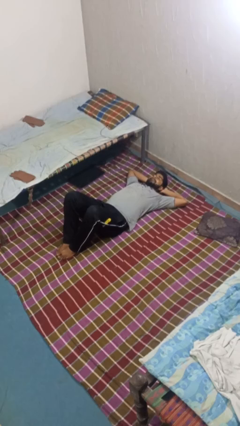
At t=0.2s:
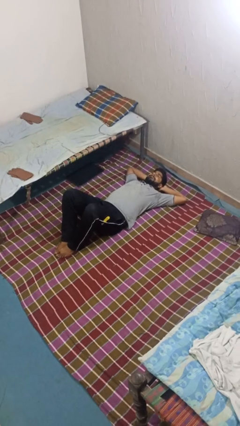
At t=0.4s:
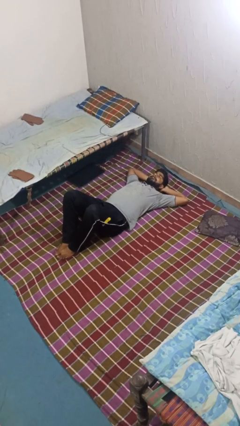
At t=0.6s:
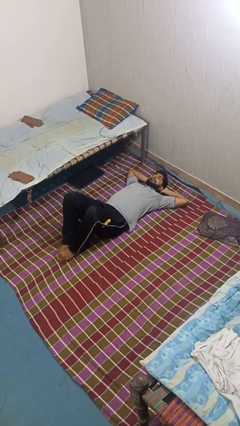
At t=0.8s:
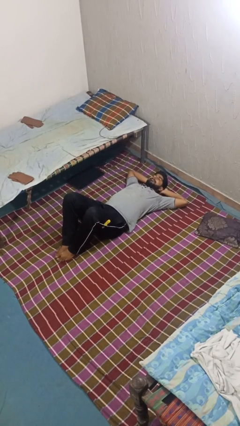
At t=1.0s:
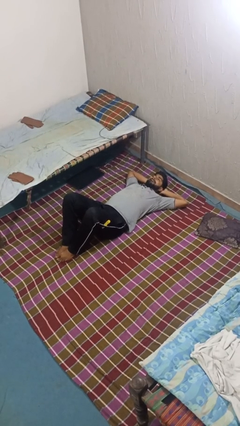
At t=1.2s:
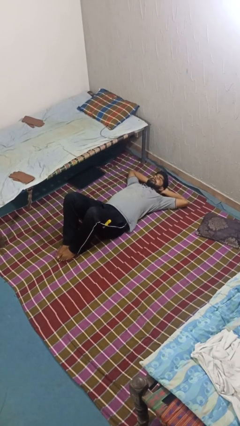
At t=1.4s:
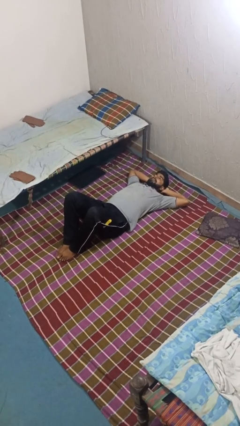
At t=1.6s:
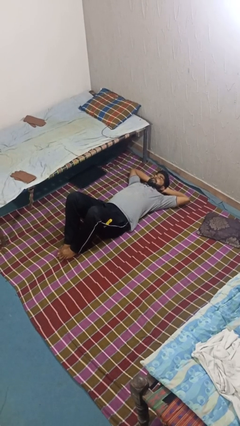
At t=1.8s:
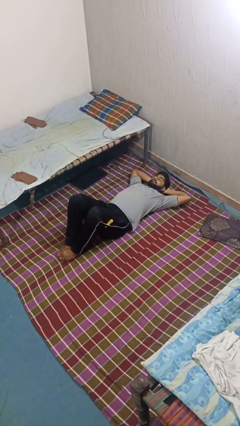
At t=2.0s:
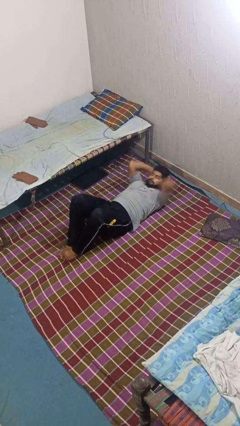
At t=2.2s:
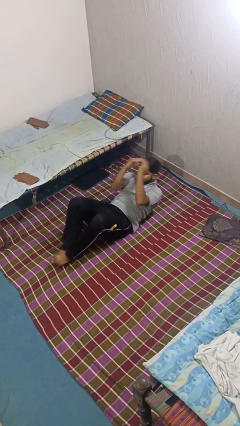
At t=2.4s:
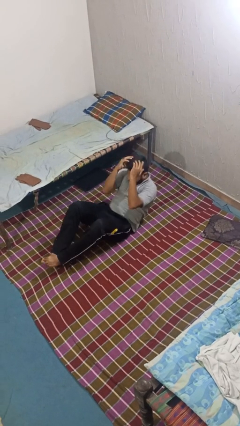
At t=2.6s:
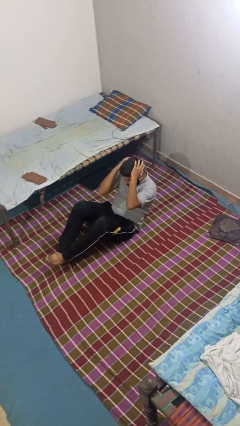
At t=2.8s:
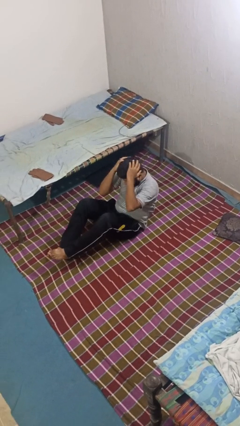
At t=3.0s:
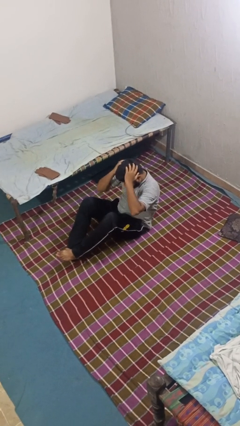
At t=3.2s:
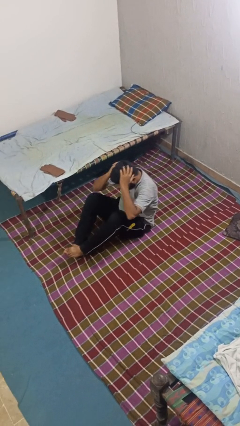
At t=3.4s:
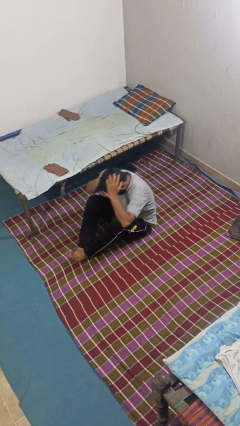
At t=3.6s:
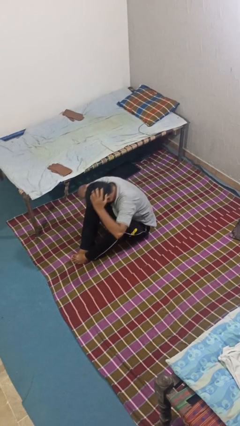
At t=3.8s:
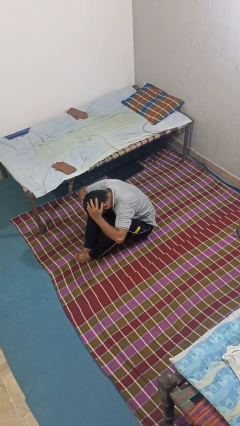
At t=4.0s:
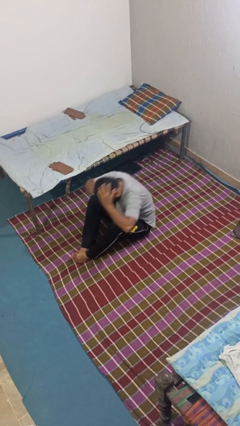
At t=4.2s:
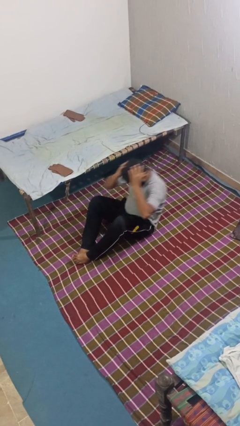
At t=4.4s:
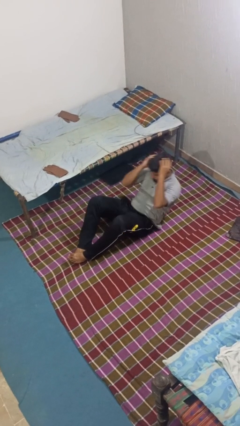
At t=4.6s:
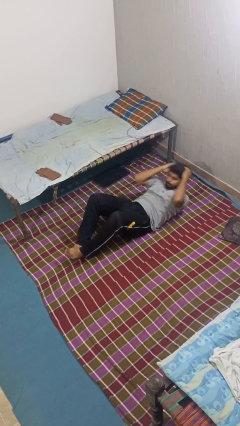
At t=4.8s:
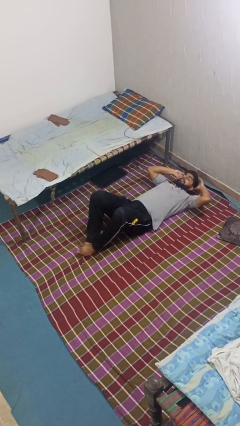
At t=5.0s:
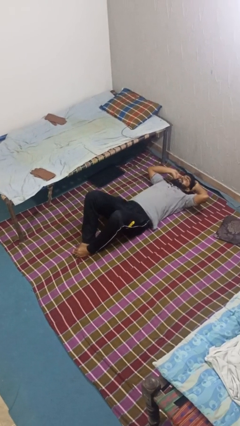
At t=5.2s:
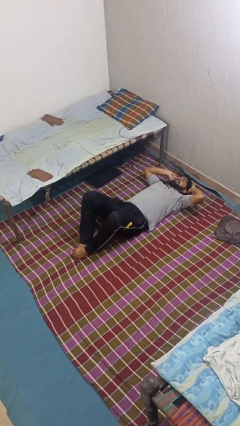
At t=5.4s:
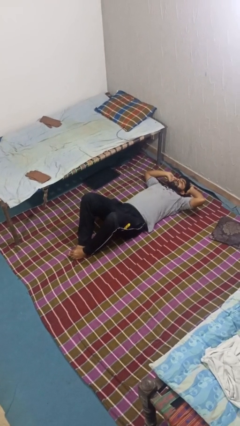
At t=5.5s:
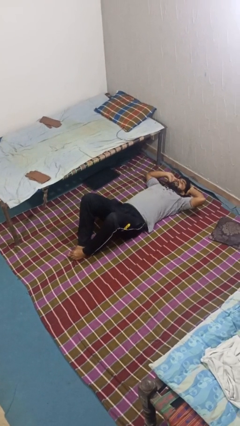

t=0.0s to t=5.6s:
person exercises with situp

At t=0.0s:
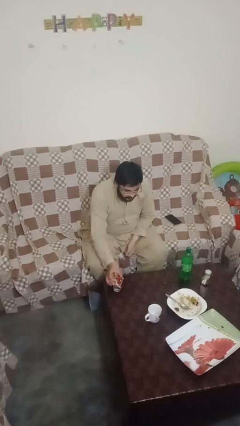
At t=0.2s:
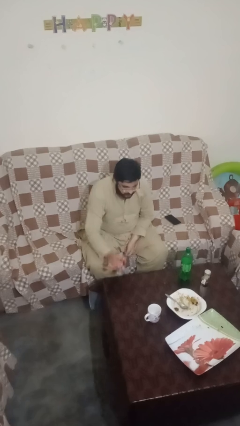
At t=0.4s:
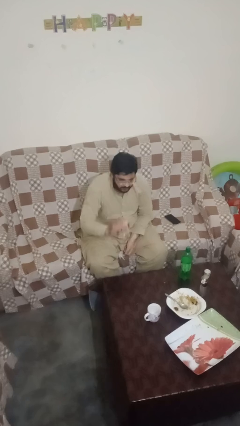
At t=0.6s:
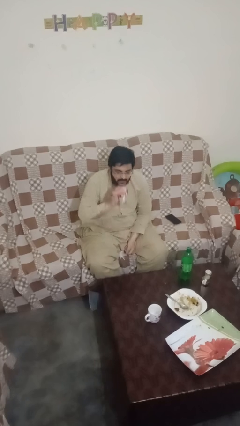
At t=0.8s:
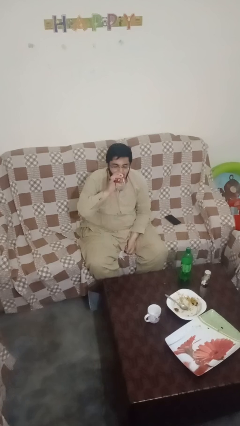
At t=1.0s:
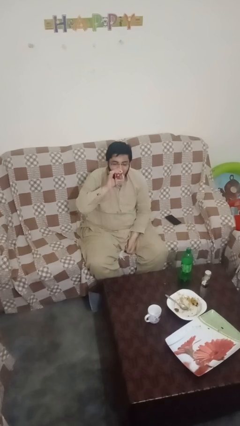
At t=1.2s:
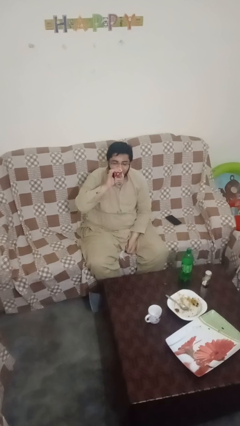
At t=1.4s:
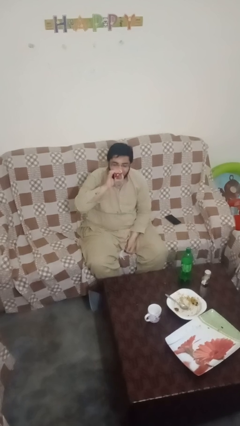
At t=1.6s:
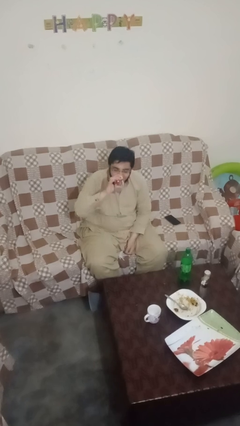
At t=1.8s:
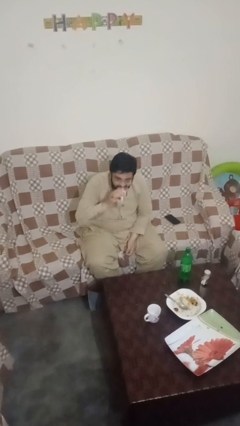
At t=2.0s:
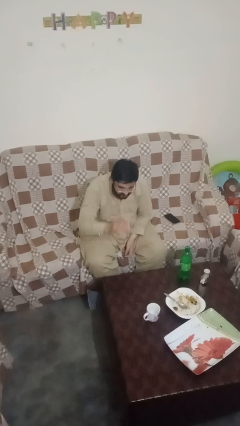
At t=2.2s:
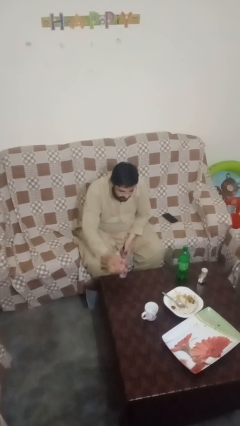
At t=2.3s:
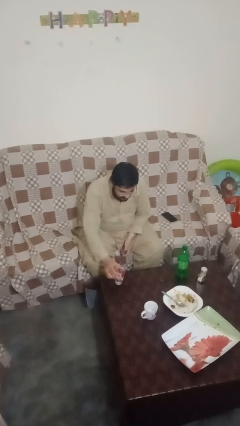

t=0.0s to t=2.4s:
person drinks from cup

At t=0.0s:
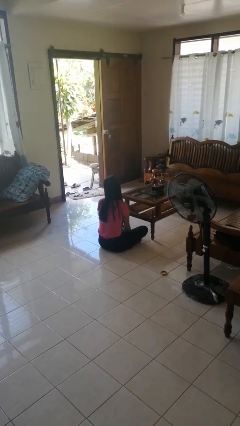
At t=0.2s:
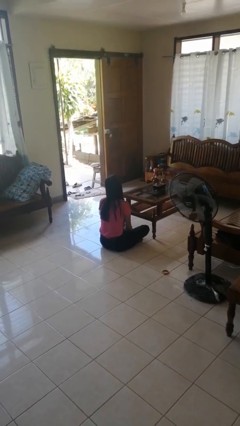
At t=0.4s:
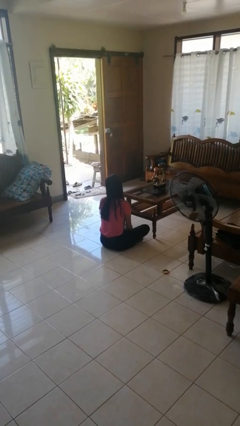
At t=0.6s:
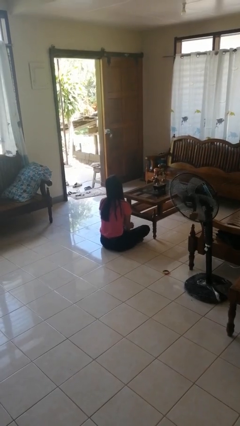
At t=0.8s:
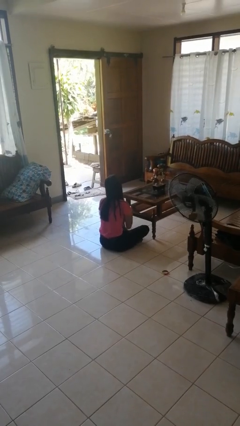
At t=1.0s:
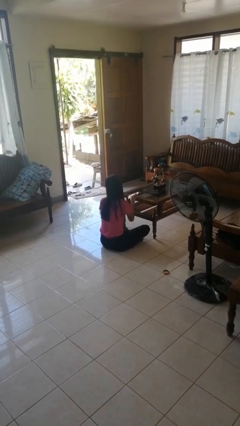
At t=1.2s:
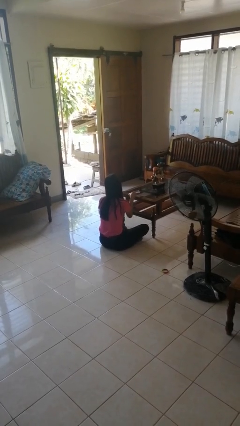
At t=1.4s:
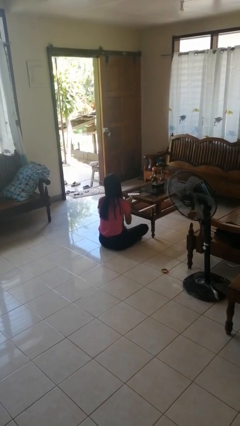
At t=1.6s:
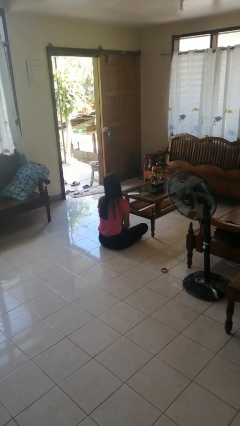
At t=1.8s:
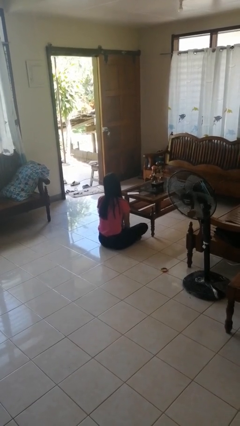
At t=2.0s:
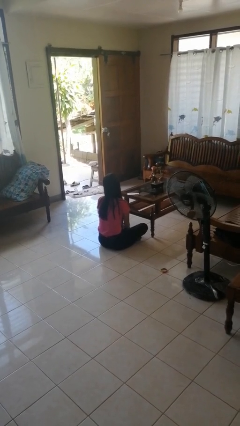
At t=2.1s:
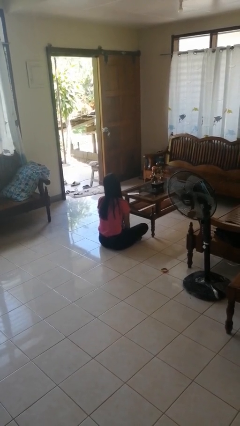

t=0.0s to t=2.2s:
person throws object on table

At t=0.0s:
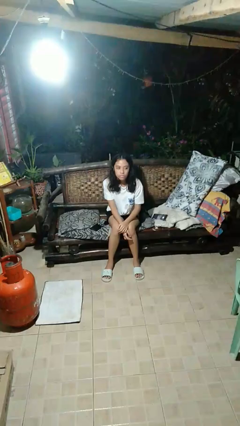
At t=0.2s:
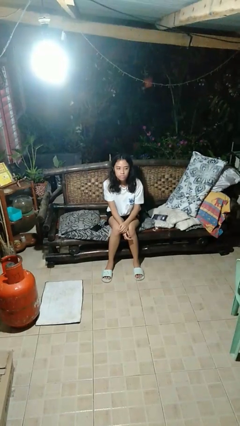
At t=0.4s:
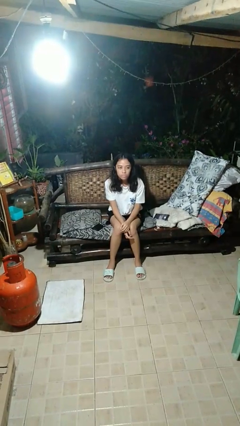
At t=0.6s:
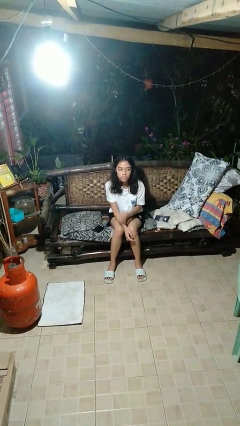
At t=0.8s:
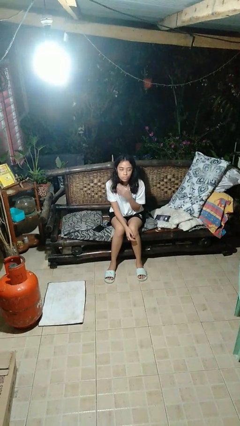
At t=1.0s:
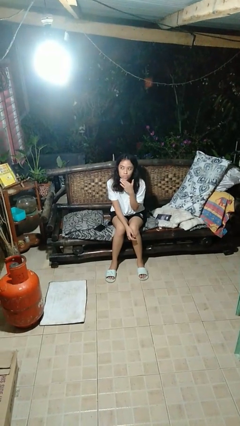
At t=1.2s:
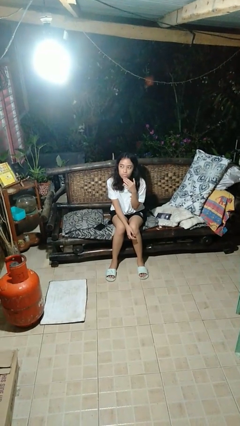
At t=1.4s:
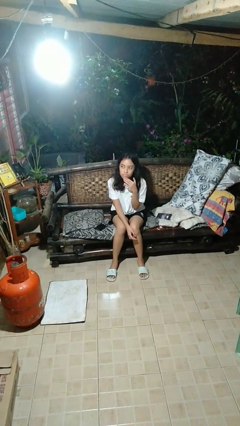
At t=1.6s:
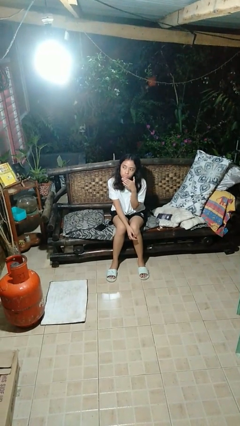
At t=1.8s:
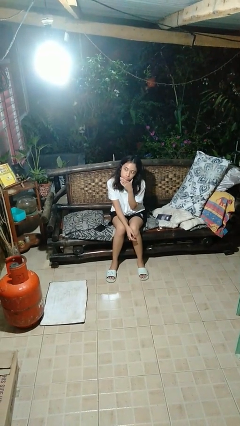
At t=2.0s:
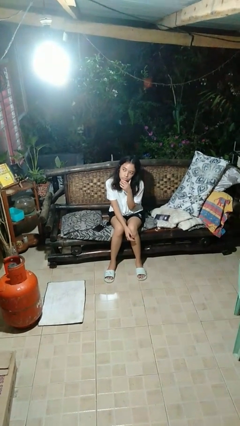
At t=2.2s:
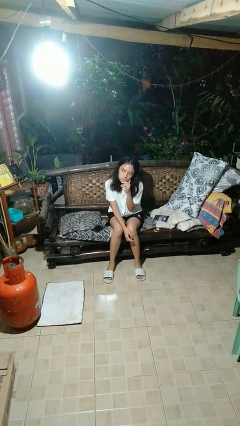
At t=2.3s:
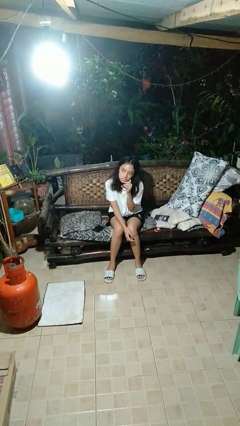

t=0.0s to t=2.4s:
person strokes chin

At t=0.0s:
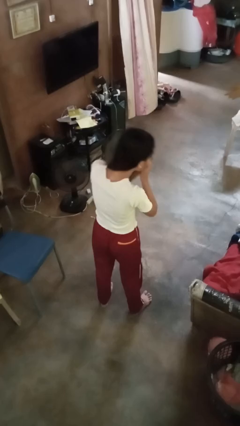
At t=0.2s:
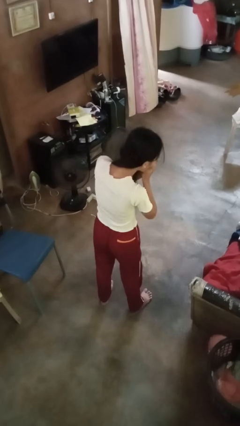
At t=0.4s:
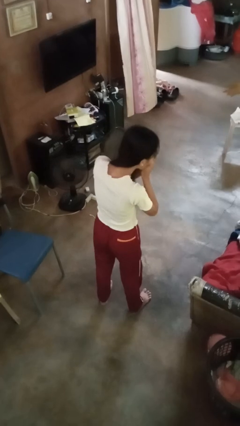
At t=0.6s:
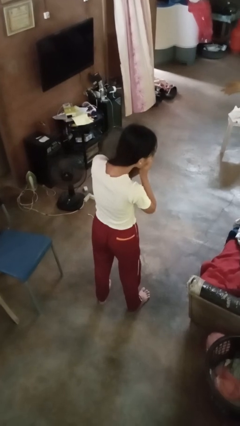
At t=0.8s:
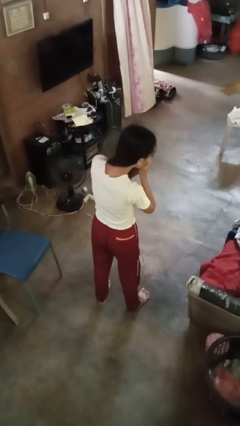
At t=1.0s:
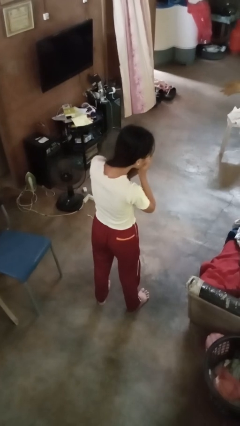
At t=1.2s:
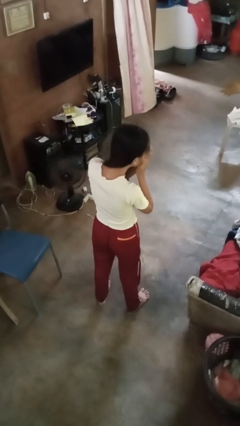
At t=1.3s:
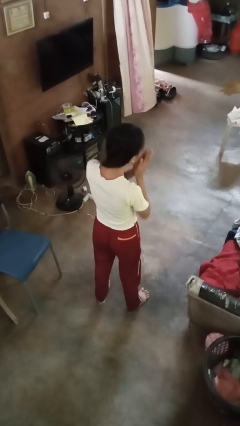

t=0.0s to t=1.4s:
person sneezes into hand

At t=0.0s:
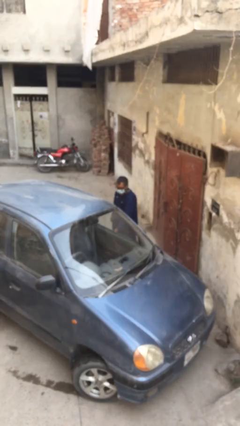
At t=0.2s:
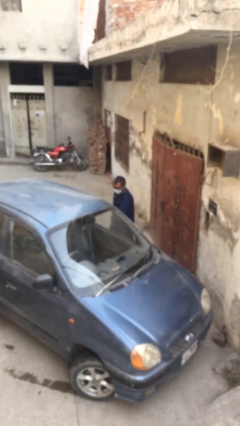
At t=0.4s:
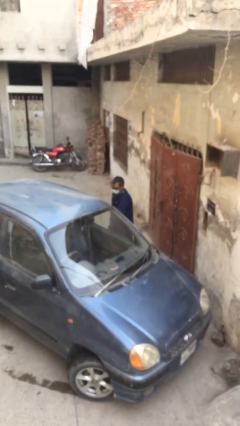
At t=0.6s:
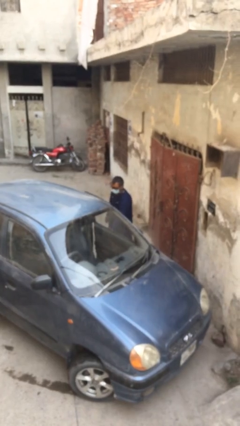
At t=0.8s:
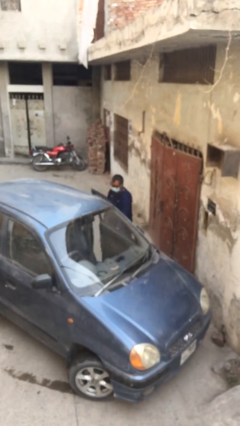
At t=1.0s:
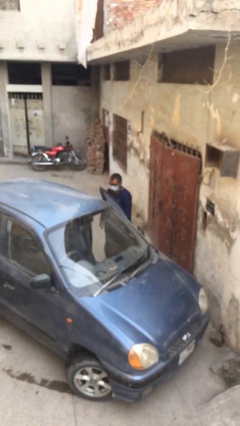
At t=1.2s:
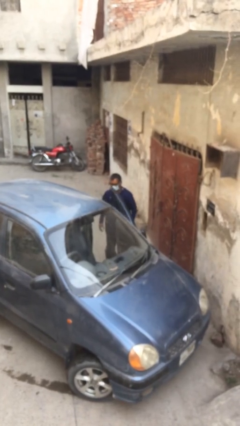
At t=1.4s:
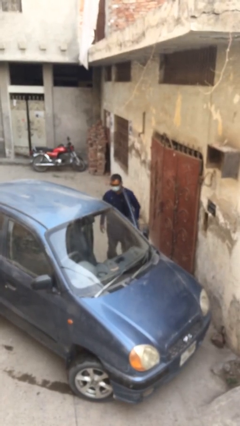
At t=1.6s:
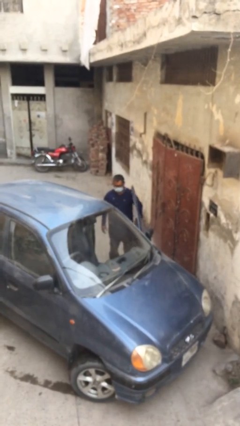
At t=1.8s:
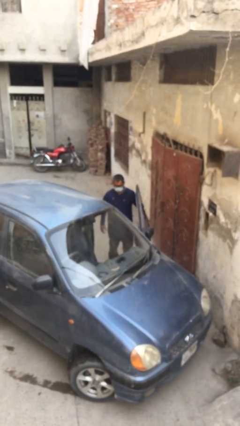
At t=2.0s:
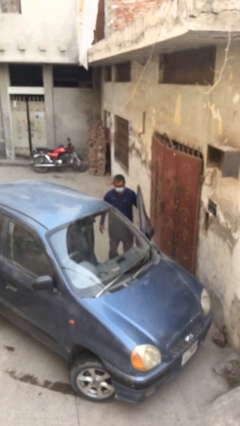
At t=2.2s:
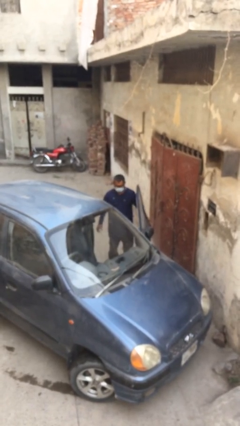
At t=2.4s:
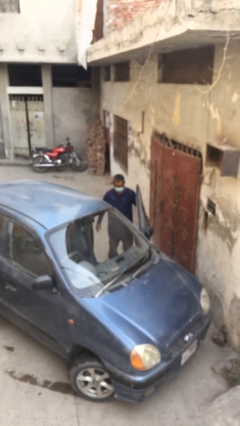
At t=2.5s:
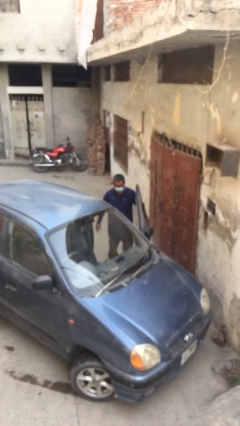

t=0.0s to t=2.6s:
person opens car door

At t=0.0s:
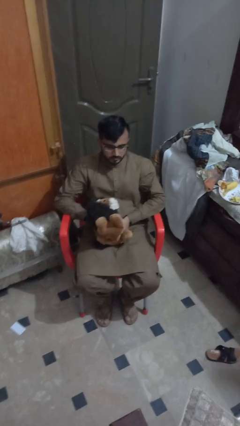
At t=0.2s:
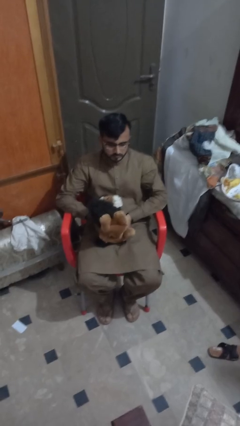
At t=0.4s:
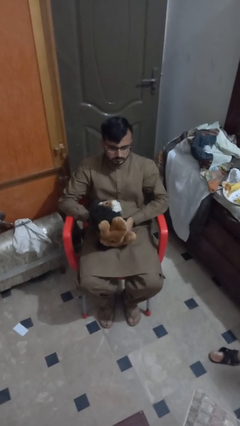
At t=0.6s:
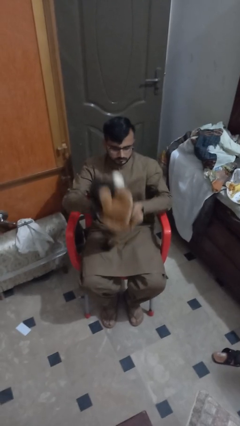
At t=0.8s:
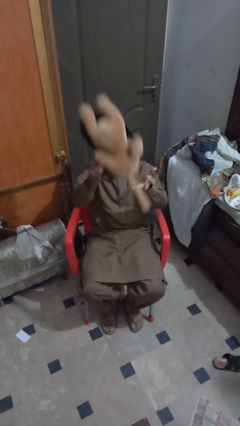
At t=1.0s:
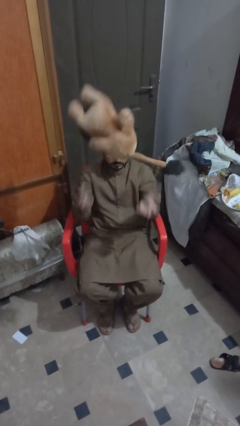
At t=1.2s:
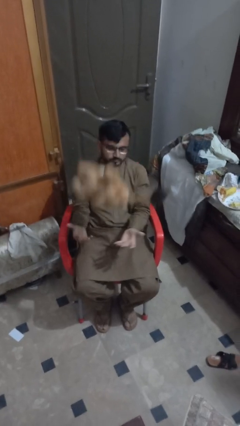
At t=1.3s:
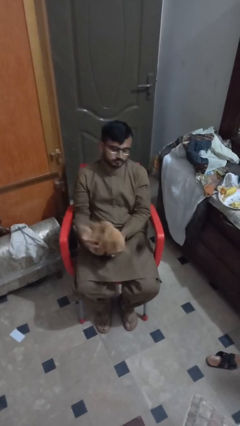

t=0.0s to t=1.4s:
person drops object
